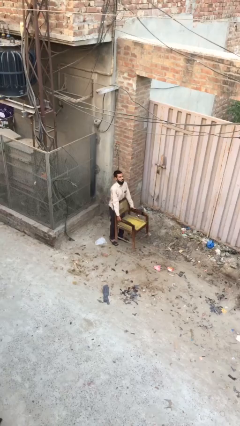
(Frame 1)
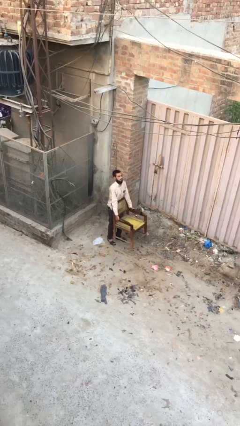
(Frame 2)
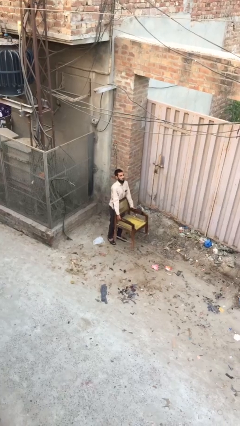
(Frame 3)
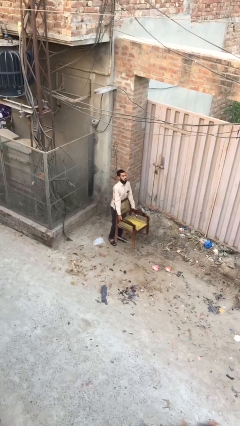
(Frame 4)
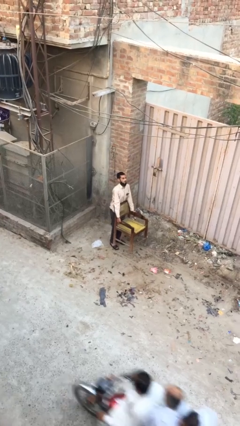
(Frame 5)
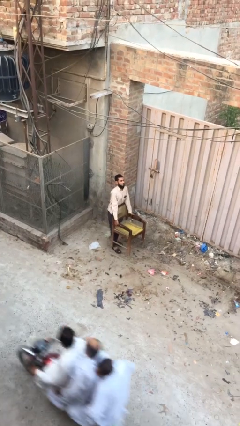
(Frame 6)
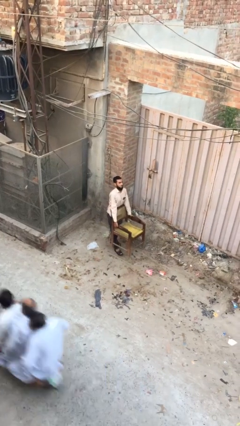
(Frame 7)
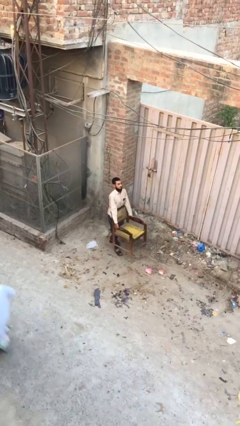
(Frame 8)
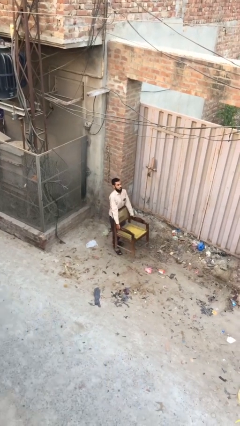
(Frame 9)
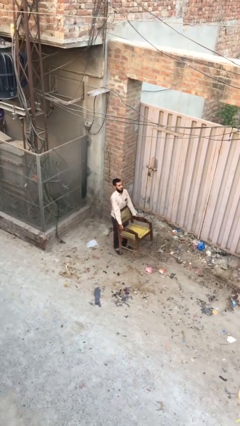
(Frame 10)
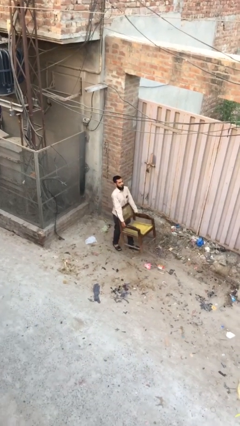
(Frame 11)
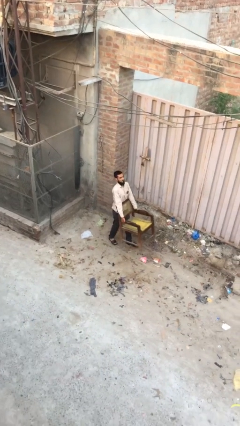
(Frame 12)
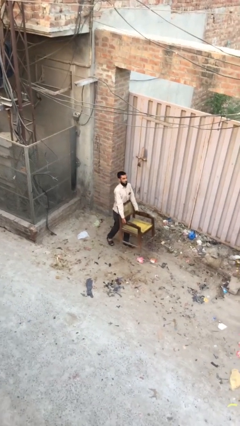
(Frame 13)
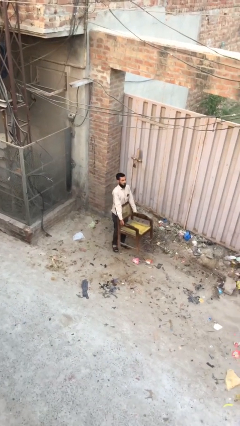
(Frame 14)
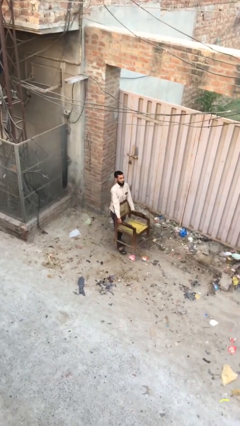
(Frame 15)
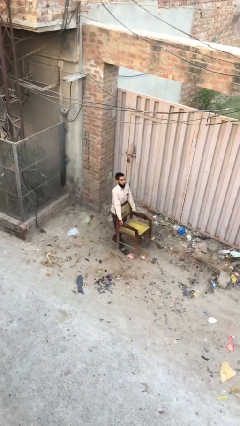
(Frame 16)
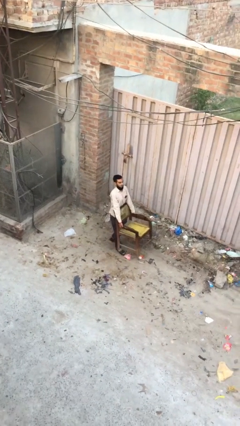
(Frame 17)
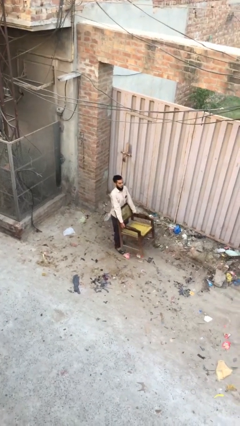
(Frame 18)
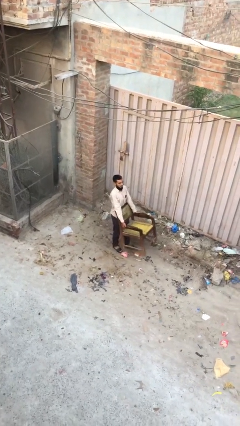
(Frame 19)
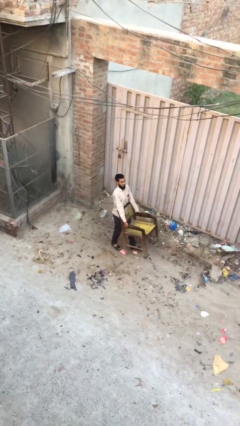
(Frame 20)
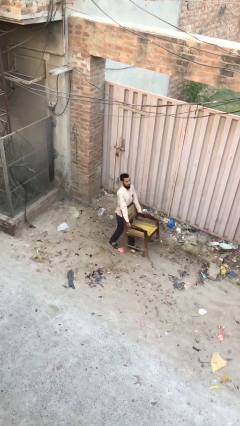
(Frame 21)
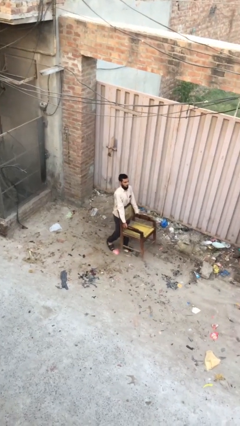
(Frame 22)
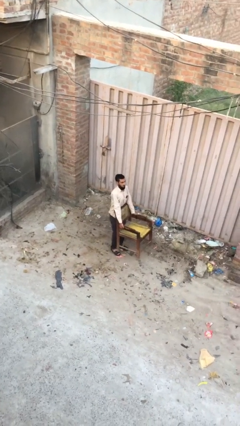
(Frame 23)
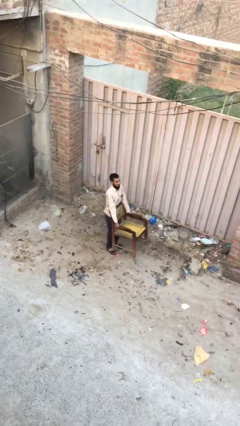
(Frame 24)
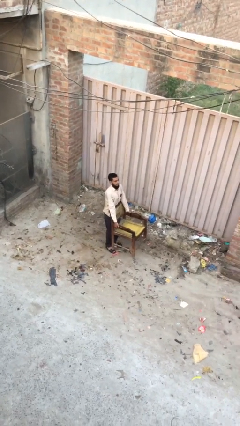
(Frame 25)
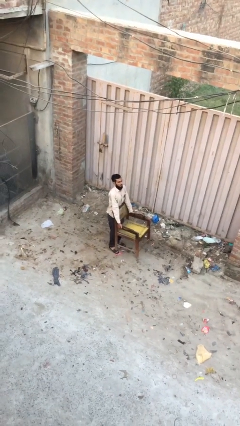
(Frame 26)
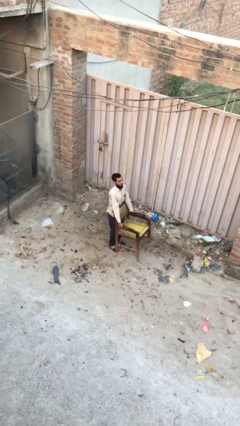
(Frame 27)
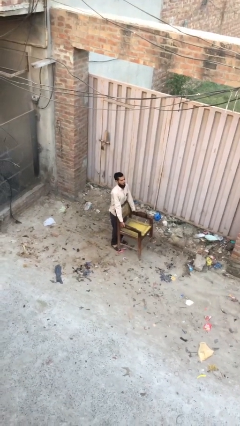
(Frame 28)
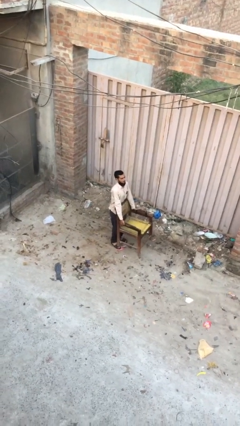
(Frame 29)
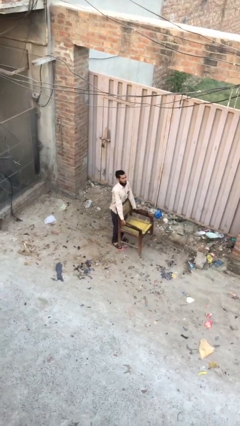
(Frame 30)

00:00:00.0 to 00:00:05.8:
person carries heavy object

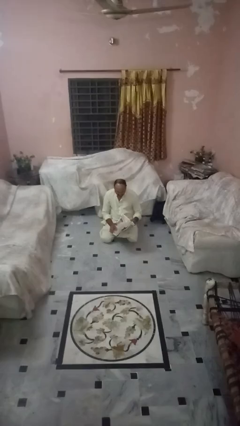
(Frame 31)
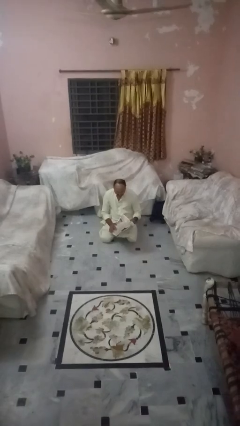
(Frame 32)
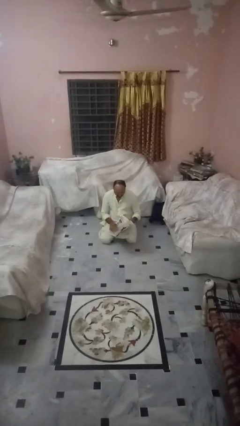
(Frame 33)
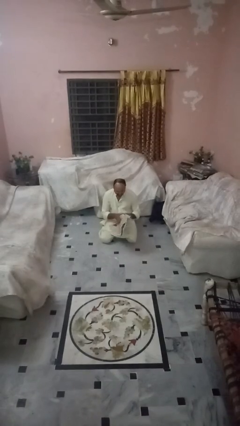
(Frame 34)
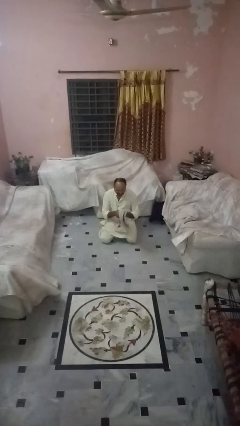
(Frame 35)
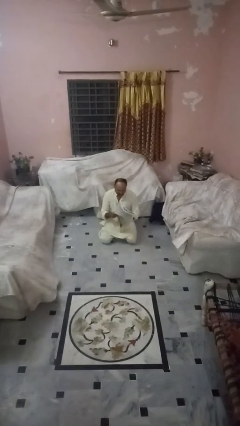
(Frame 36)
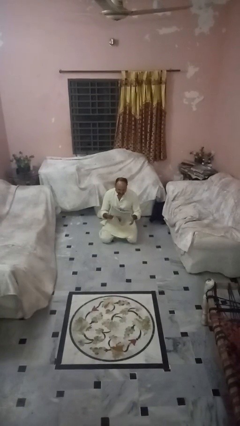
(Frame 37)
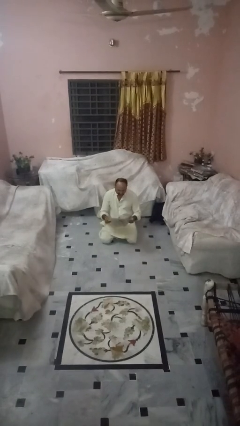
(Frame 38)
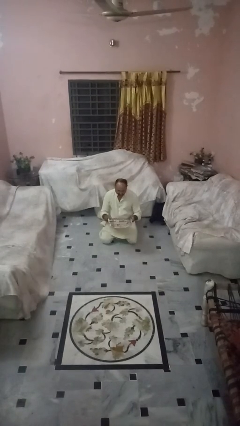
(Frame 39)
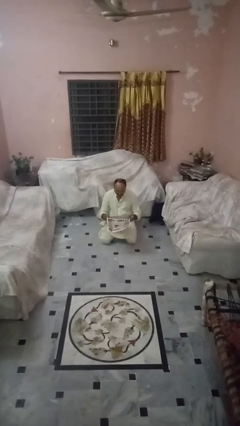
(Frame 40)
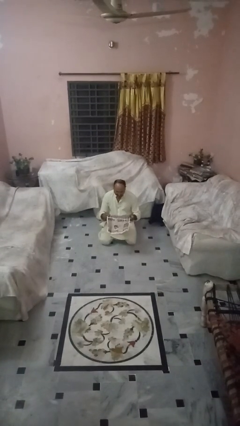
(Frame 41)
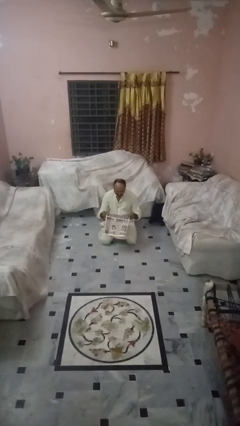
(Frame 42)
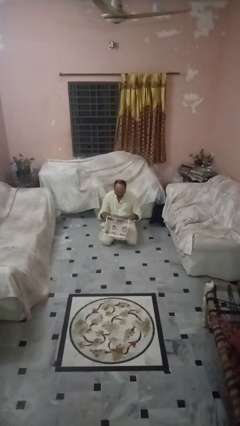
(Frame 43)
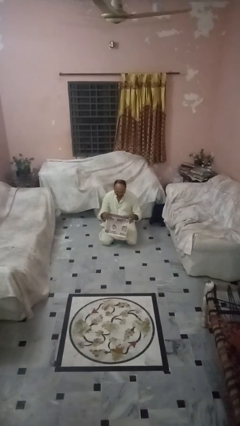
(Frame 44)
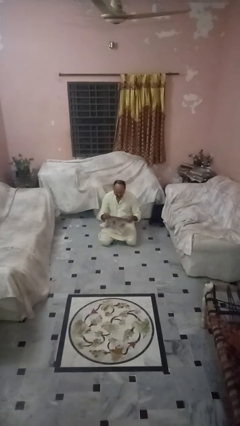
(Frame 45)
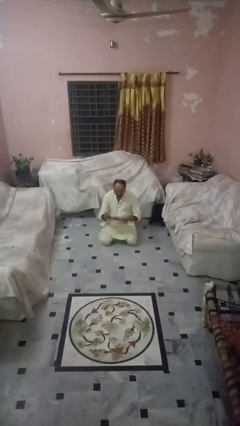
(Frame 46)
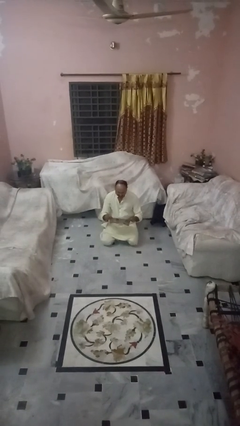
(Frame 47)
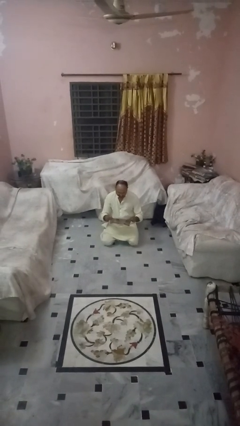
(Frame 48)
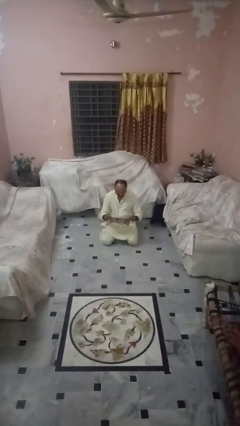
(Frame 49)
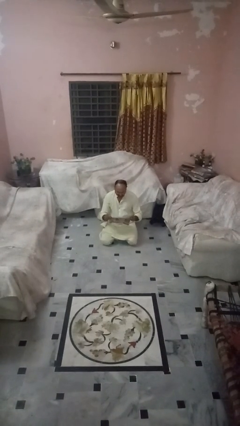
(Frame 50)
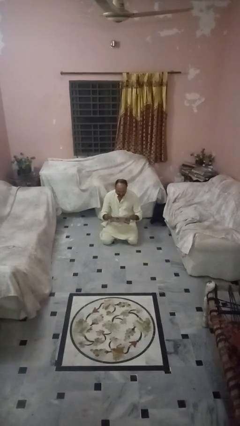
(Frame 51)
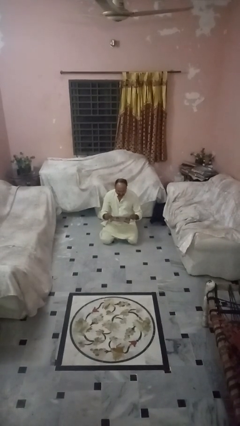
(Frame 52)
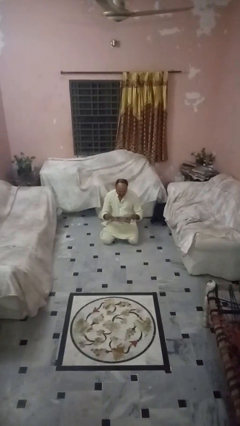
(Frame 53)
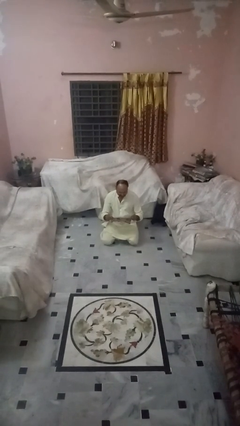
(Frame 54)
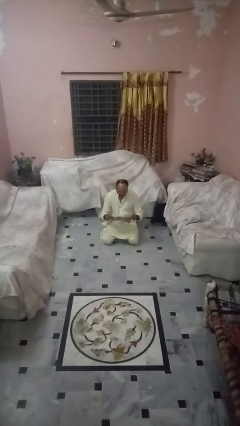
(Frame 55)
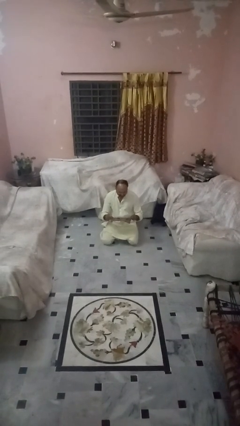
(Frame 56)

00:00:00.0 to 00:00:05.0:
person reads newspaper

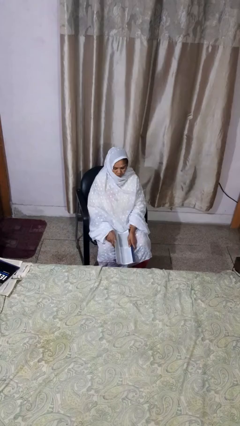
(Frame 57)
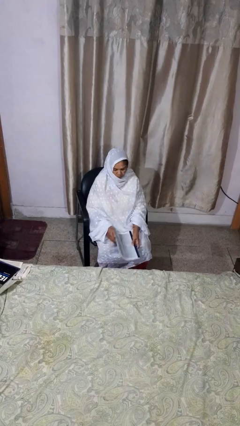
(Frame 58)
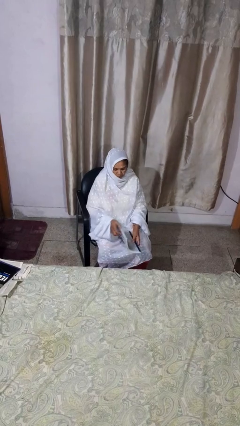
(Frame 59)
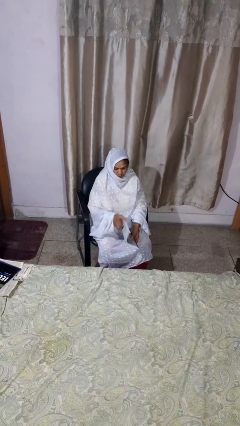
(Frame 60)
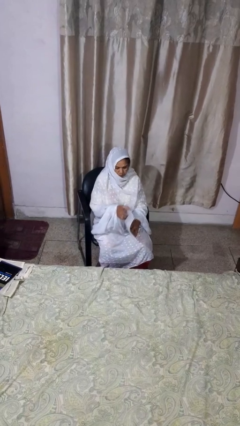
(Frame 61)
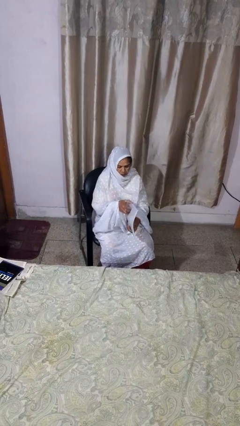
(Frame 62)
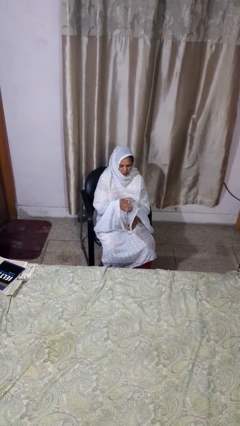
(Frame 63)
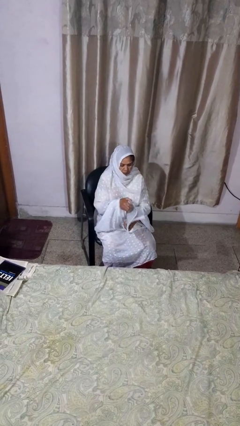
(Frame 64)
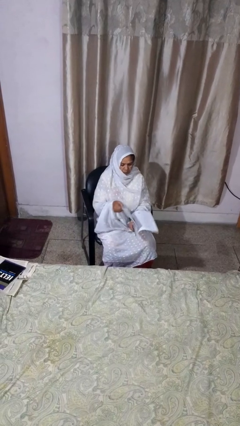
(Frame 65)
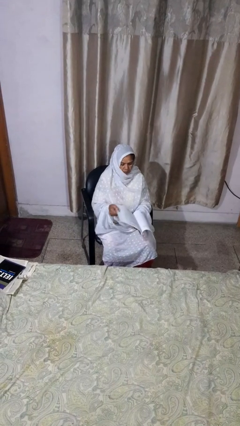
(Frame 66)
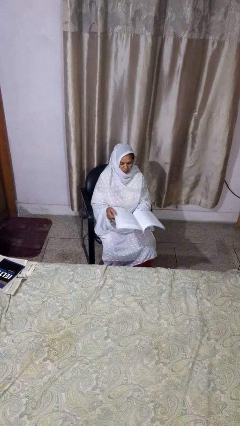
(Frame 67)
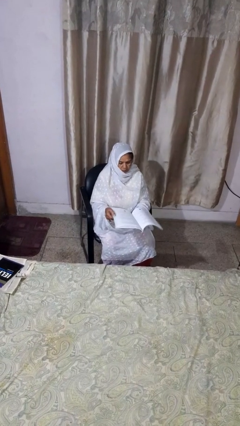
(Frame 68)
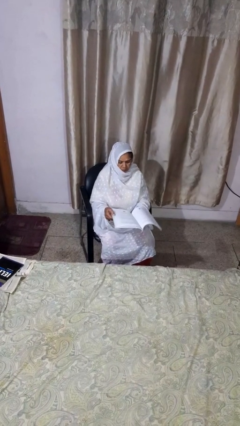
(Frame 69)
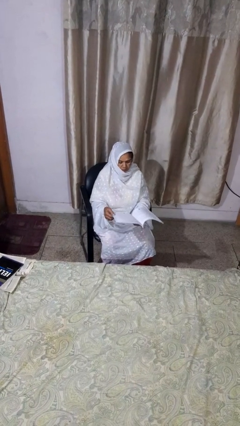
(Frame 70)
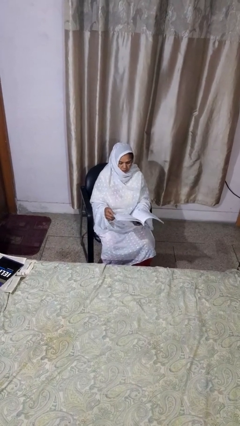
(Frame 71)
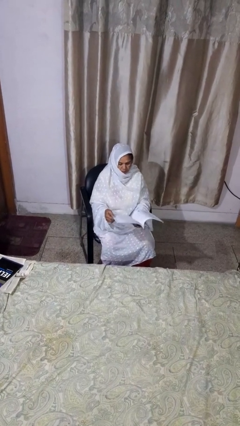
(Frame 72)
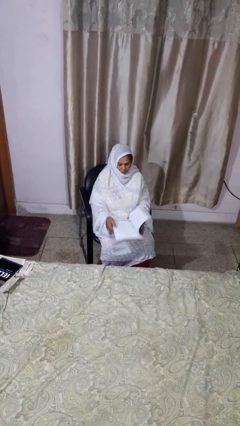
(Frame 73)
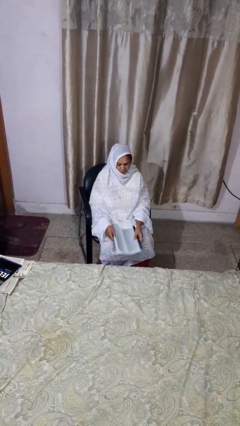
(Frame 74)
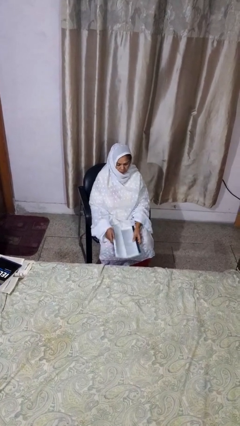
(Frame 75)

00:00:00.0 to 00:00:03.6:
person reads magazine

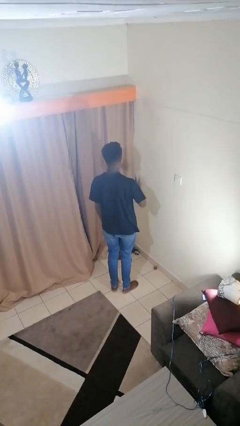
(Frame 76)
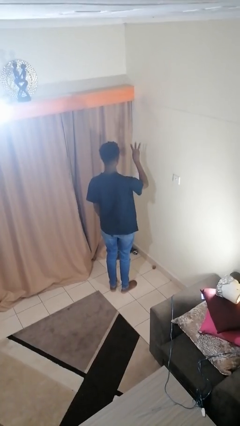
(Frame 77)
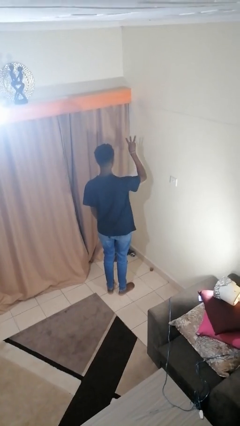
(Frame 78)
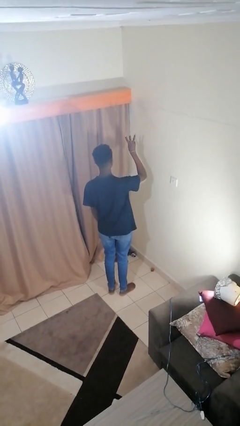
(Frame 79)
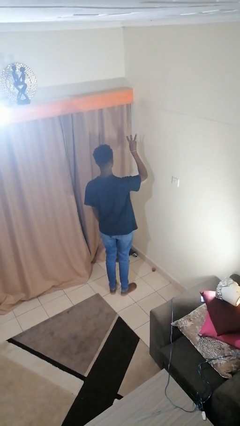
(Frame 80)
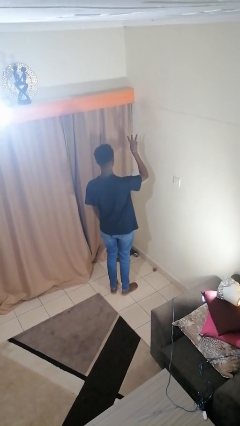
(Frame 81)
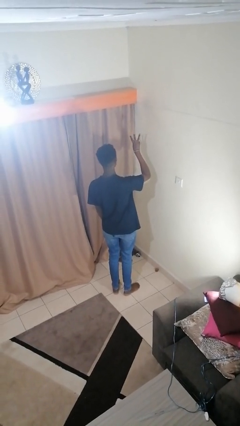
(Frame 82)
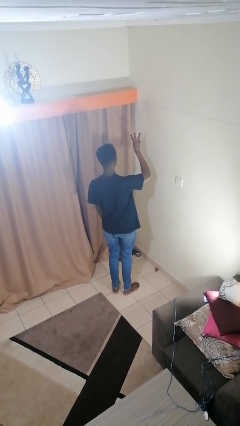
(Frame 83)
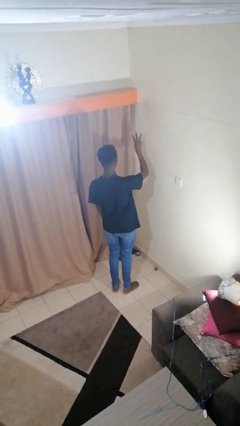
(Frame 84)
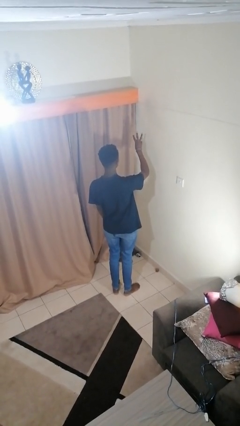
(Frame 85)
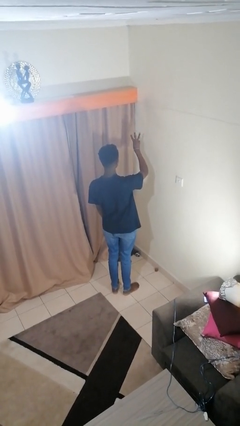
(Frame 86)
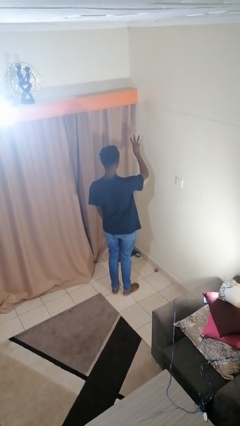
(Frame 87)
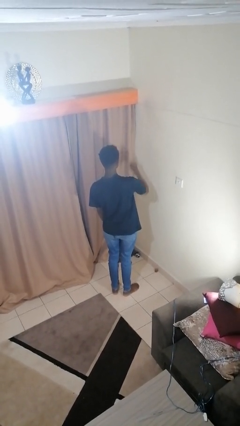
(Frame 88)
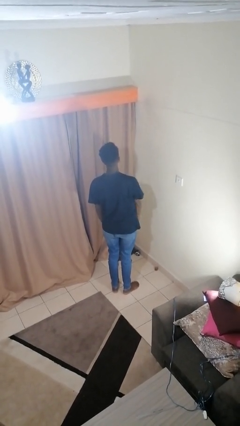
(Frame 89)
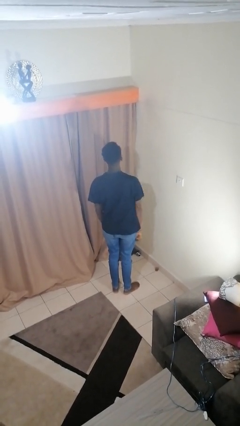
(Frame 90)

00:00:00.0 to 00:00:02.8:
person gestures number three

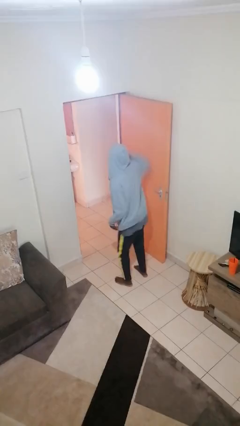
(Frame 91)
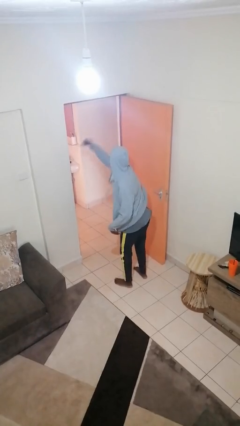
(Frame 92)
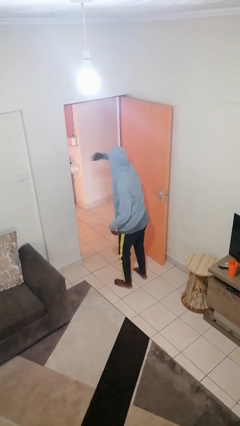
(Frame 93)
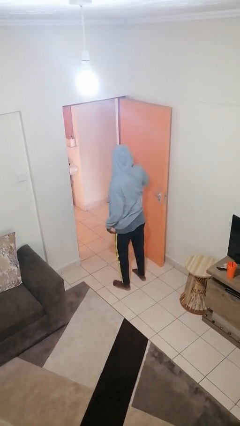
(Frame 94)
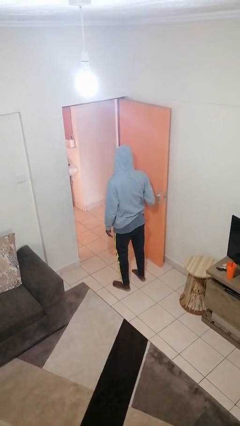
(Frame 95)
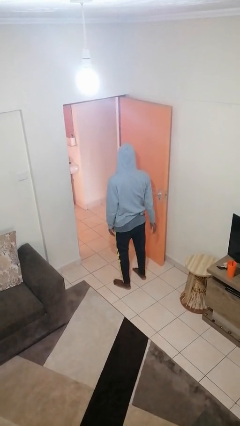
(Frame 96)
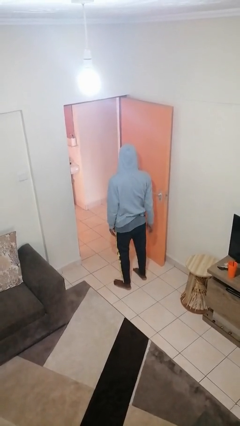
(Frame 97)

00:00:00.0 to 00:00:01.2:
person punches
